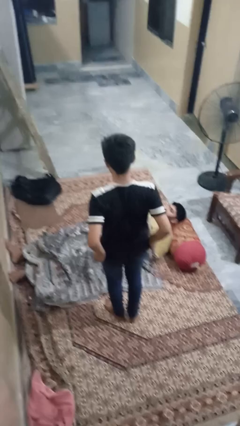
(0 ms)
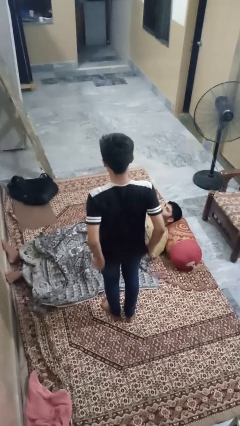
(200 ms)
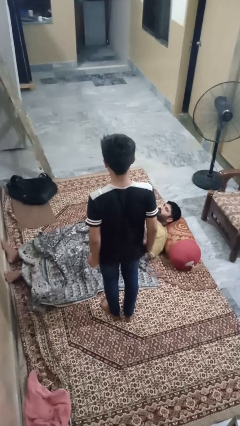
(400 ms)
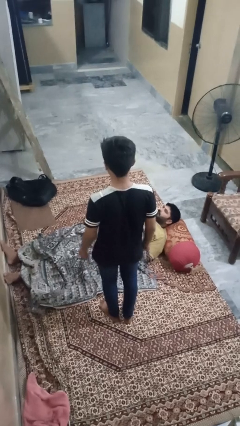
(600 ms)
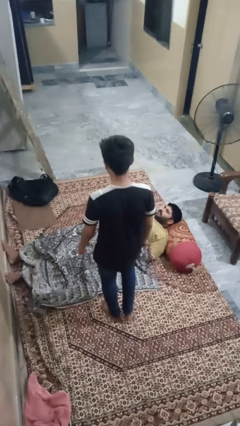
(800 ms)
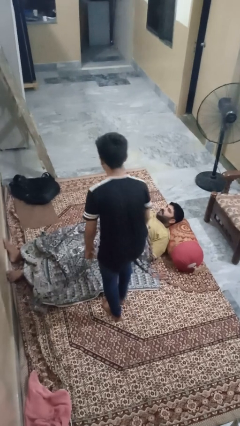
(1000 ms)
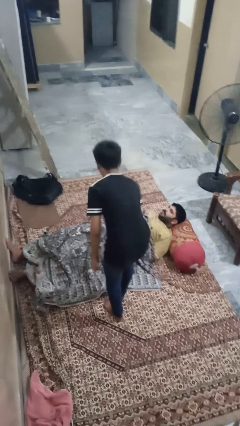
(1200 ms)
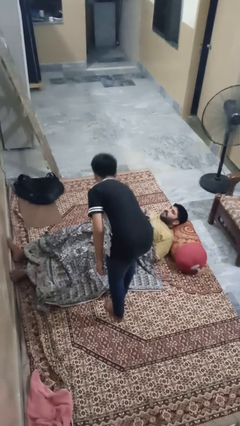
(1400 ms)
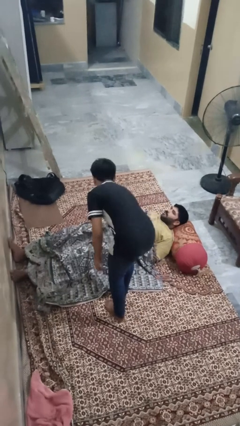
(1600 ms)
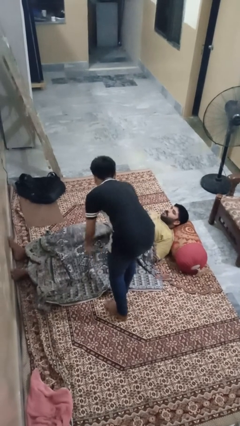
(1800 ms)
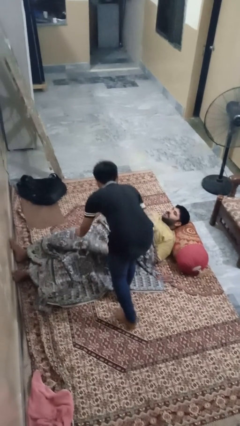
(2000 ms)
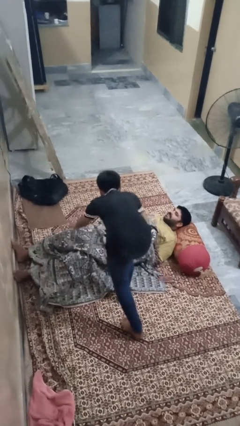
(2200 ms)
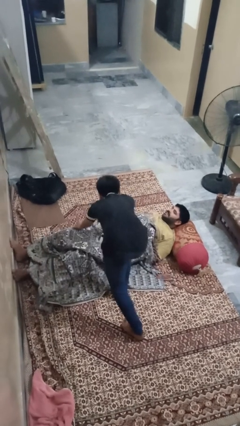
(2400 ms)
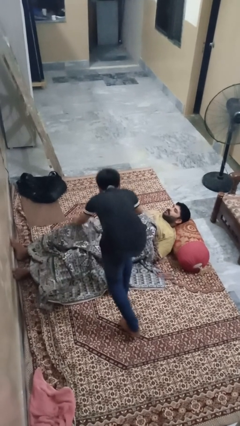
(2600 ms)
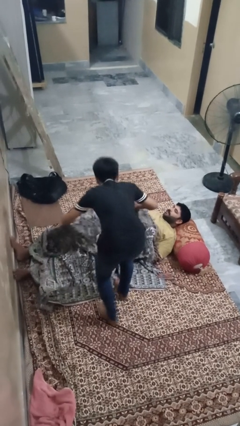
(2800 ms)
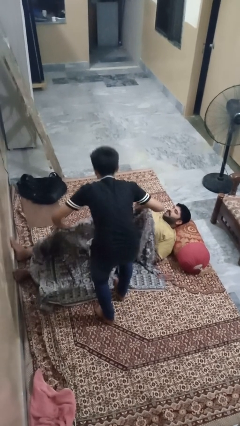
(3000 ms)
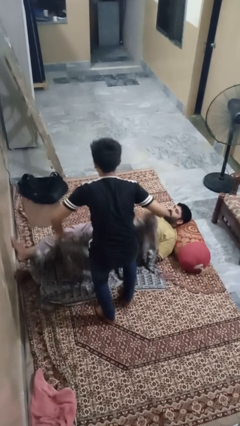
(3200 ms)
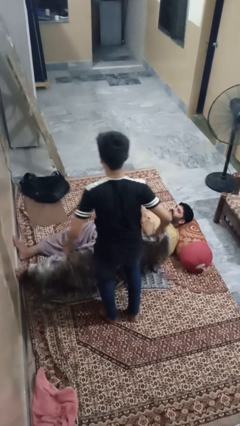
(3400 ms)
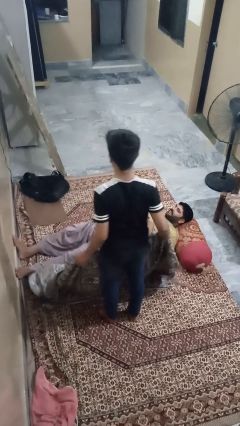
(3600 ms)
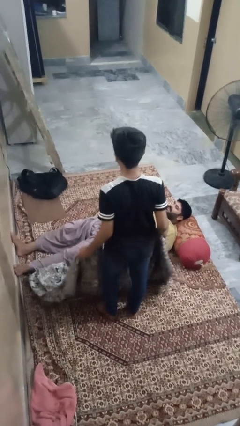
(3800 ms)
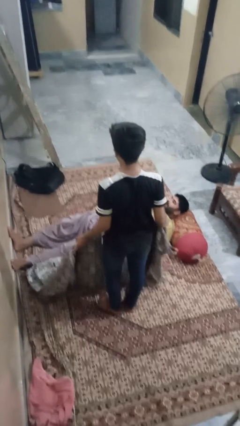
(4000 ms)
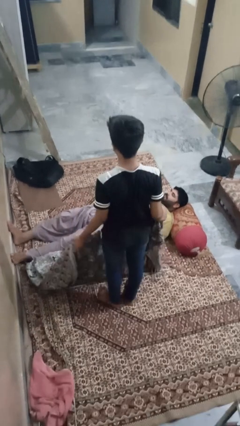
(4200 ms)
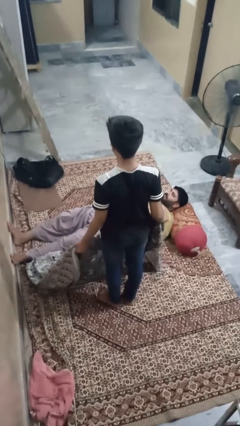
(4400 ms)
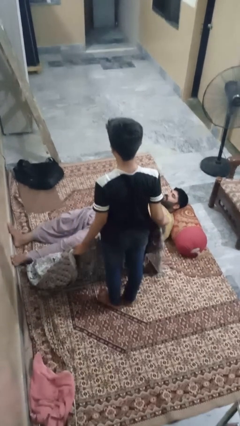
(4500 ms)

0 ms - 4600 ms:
person uncovers friend with blanket

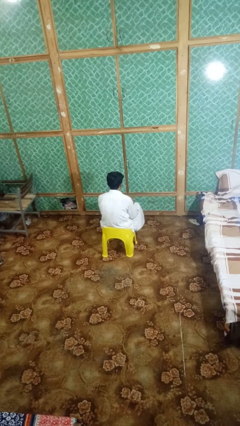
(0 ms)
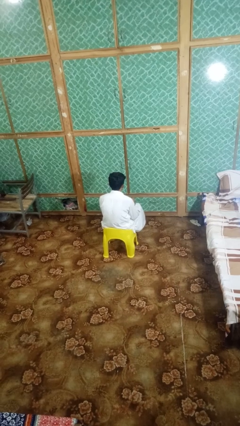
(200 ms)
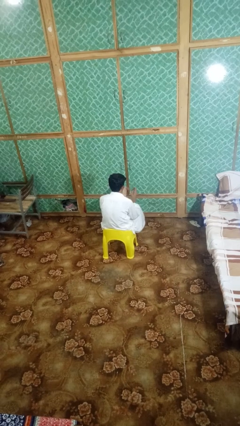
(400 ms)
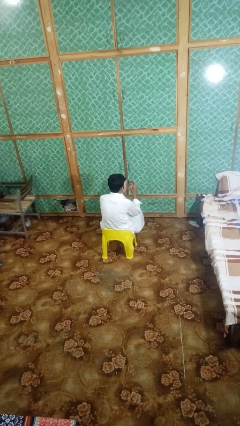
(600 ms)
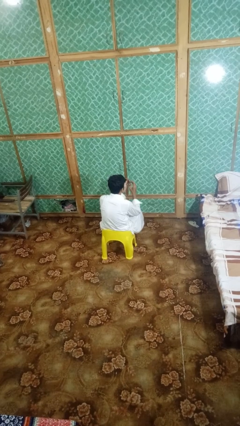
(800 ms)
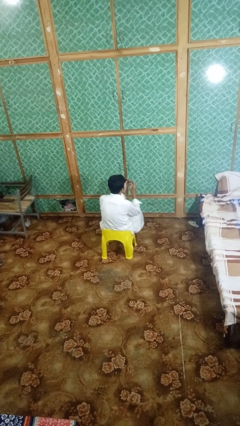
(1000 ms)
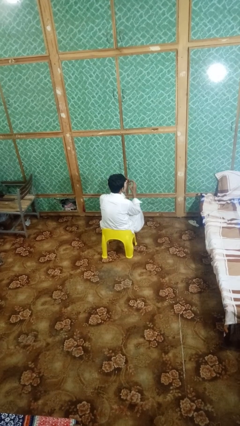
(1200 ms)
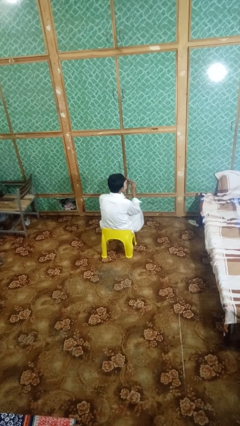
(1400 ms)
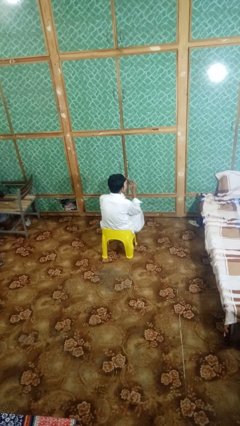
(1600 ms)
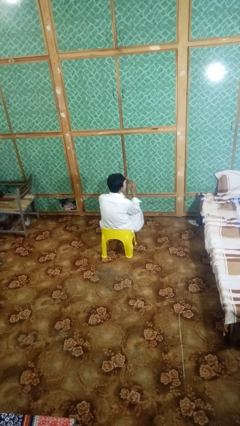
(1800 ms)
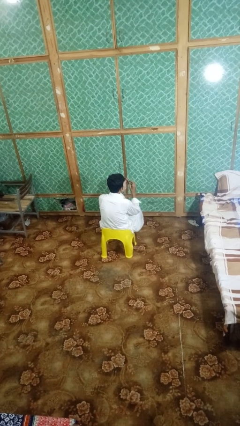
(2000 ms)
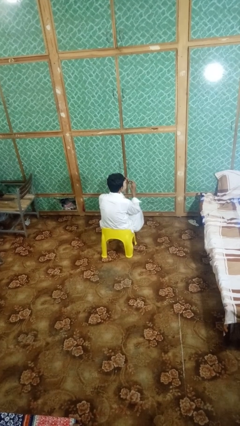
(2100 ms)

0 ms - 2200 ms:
person clips fingernails

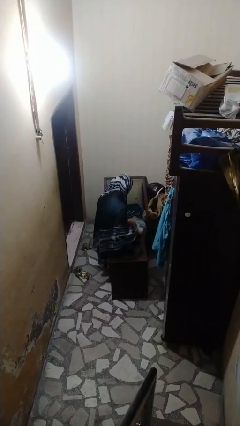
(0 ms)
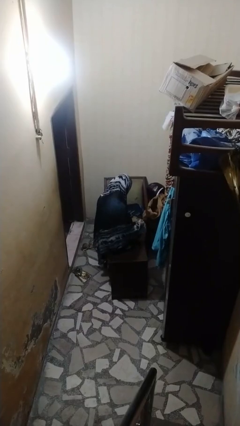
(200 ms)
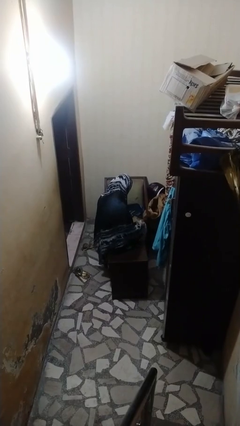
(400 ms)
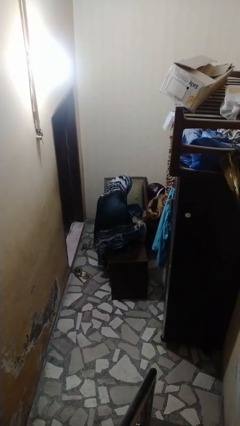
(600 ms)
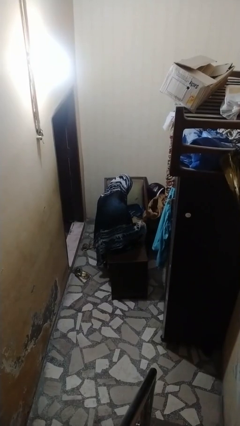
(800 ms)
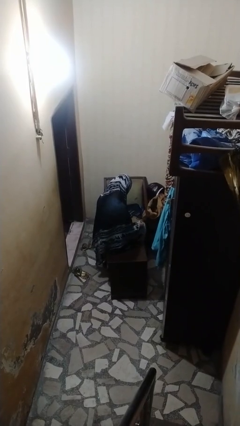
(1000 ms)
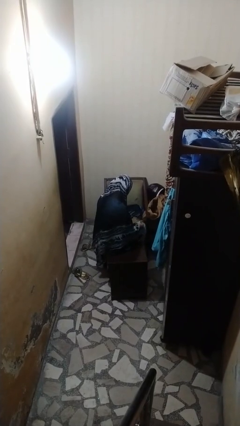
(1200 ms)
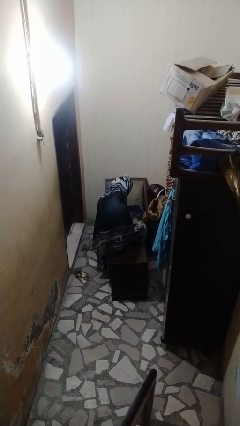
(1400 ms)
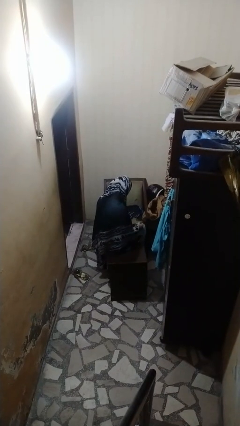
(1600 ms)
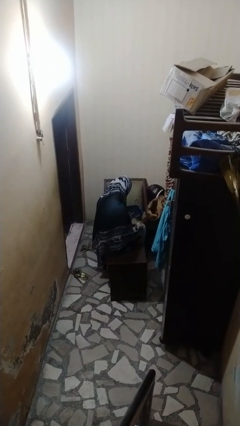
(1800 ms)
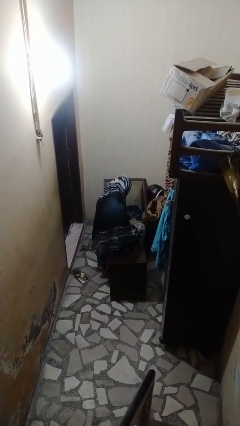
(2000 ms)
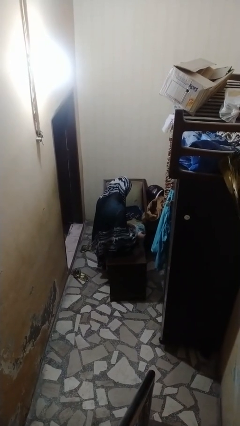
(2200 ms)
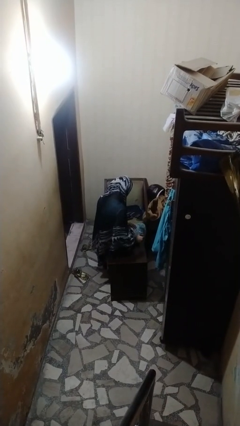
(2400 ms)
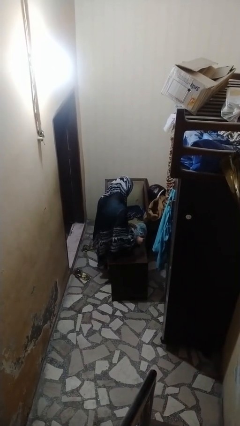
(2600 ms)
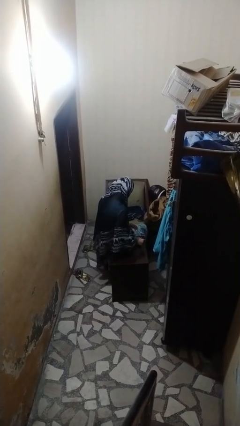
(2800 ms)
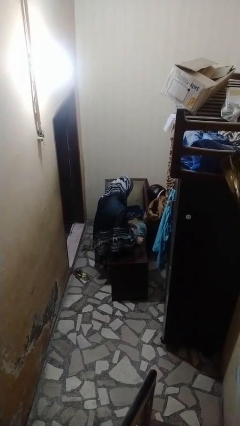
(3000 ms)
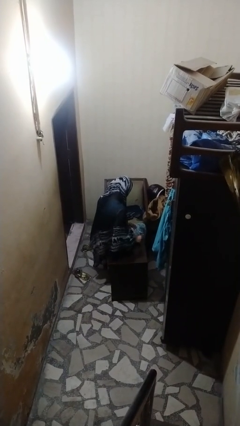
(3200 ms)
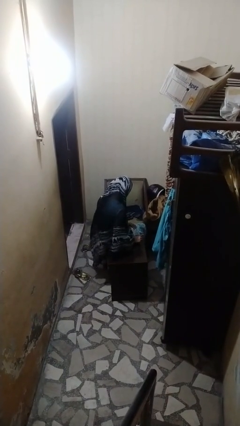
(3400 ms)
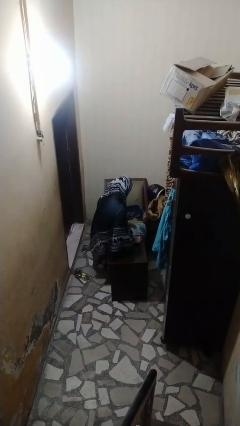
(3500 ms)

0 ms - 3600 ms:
person paints fingernails

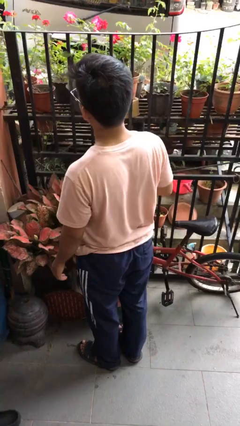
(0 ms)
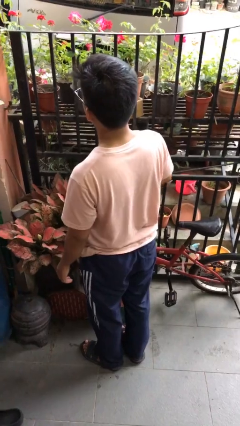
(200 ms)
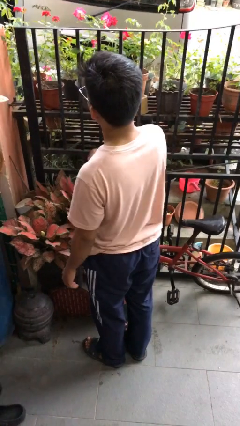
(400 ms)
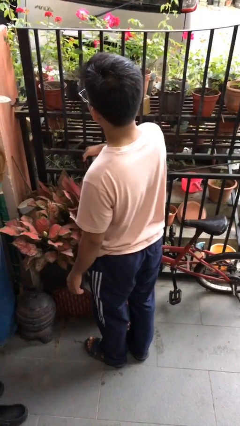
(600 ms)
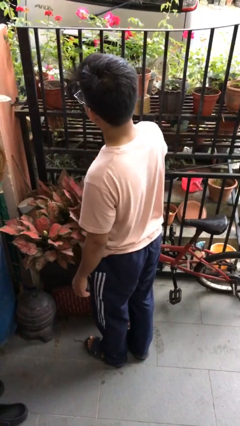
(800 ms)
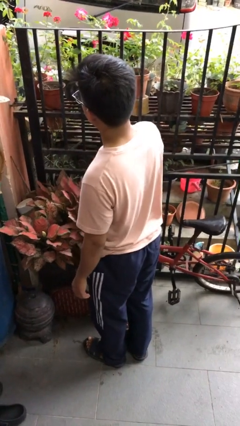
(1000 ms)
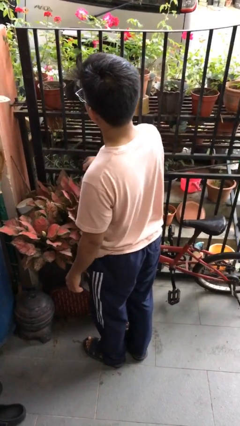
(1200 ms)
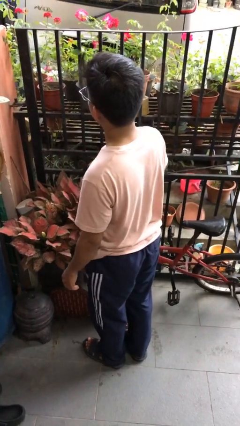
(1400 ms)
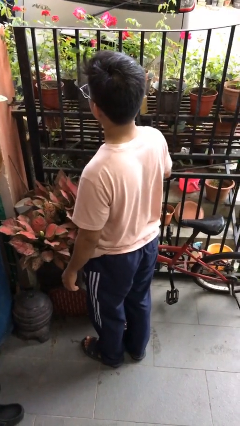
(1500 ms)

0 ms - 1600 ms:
person waters houseplant

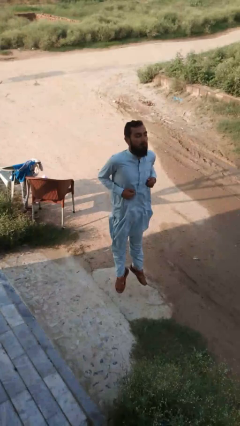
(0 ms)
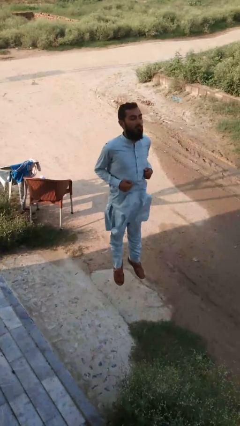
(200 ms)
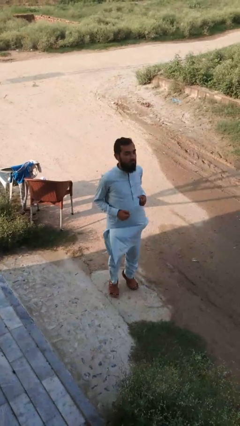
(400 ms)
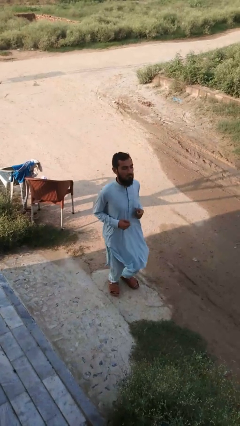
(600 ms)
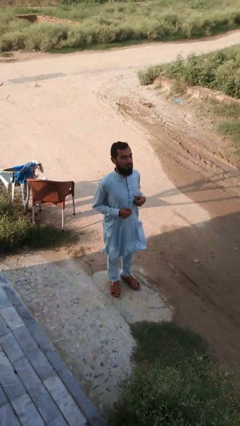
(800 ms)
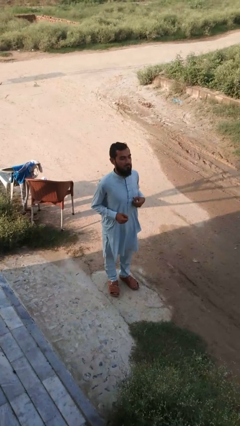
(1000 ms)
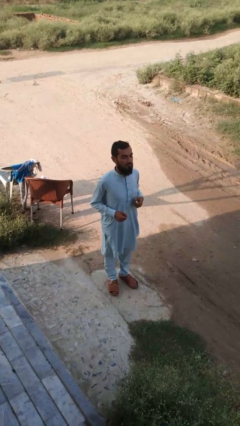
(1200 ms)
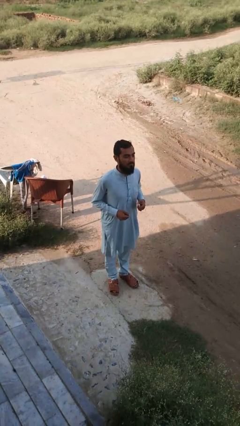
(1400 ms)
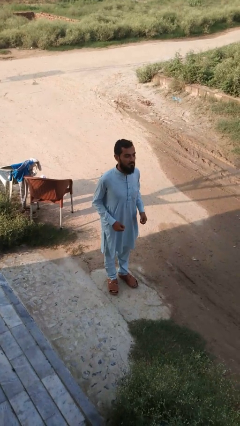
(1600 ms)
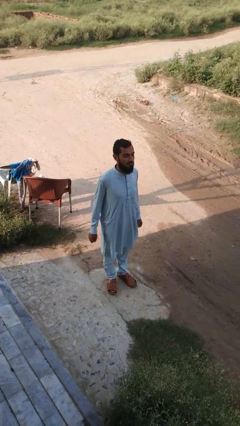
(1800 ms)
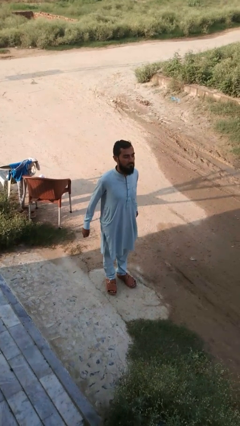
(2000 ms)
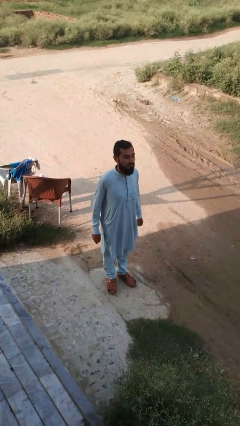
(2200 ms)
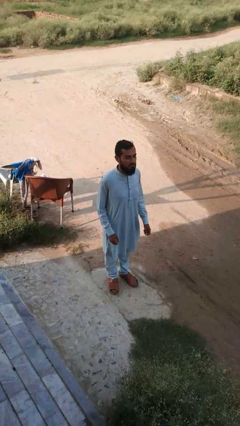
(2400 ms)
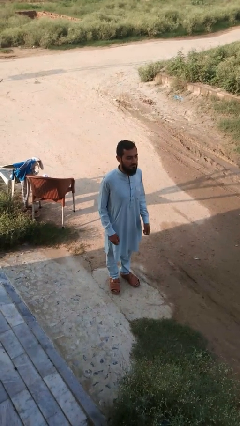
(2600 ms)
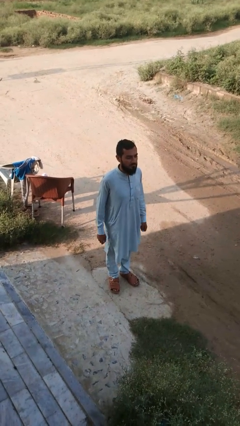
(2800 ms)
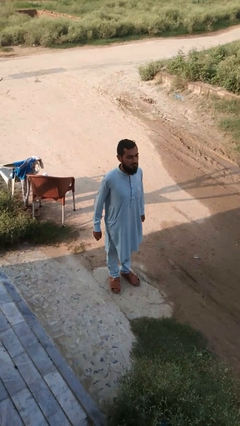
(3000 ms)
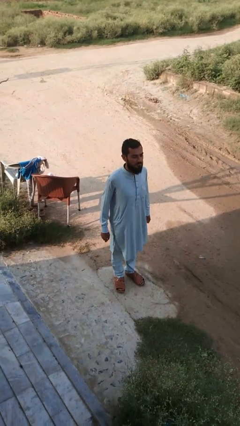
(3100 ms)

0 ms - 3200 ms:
person jumps

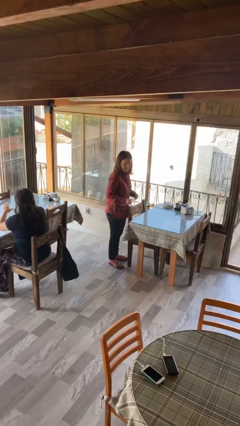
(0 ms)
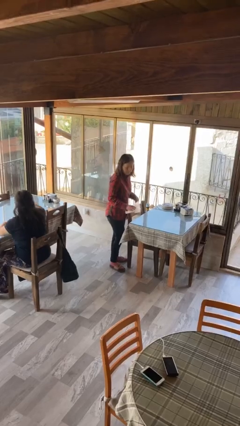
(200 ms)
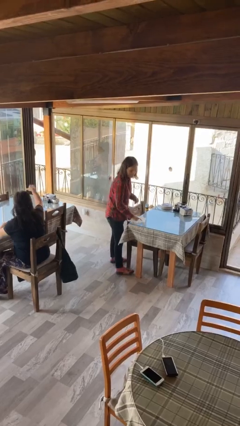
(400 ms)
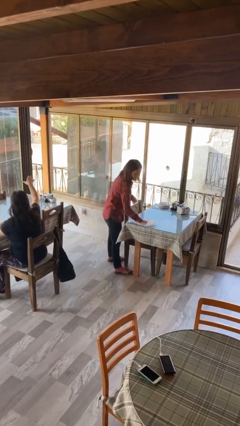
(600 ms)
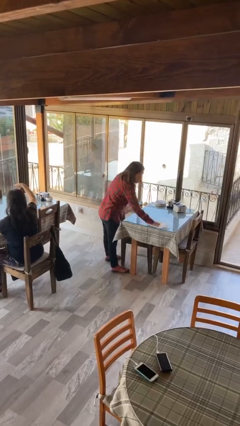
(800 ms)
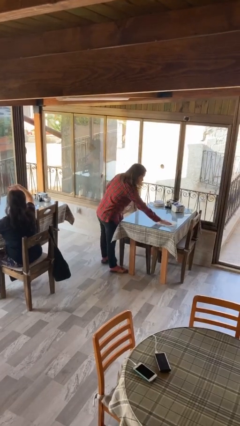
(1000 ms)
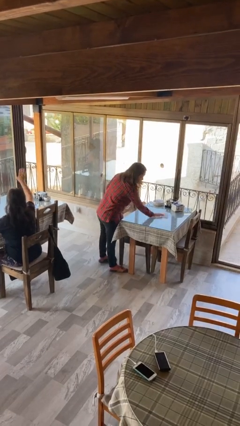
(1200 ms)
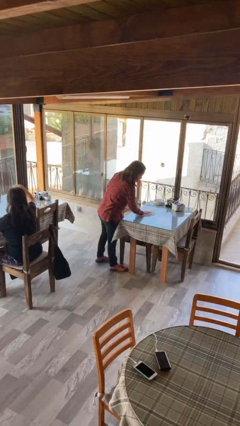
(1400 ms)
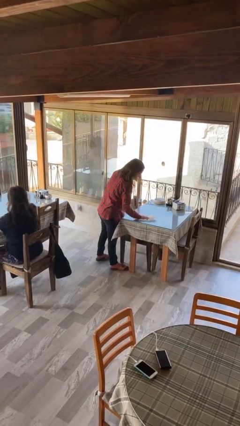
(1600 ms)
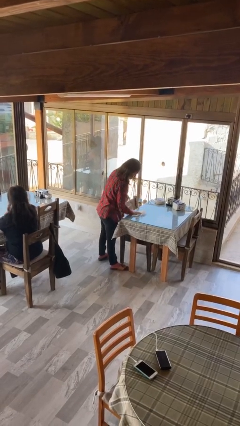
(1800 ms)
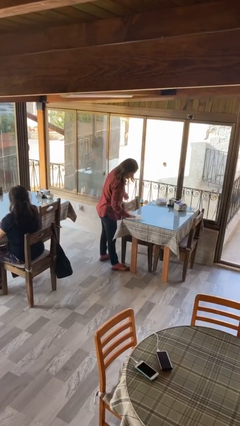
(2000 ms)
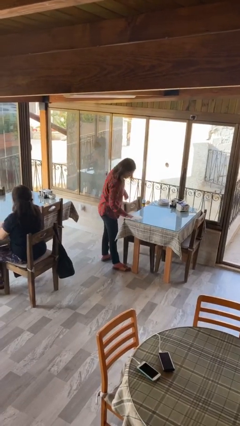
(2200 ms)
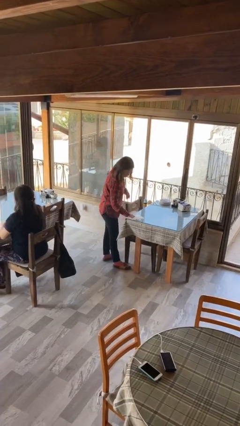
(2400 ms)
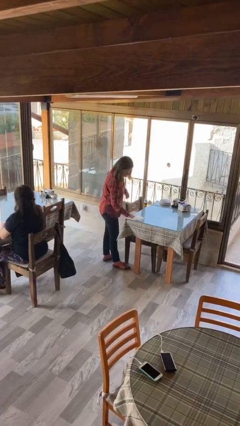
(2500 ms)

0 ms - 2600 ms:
person cleans table with rag
